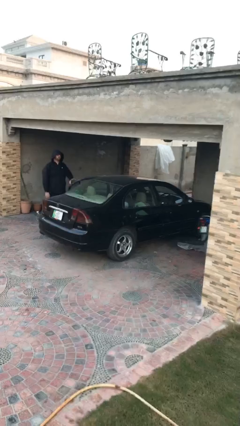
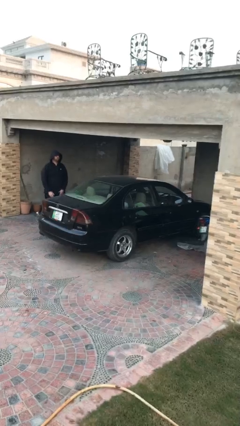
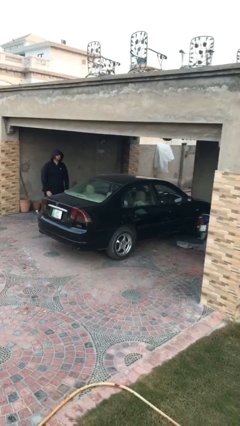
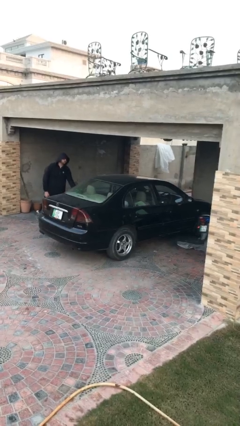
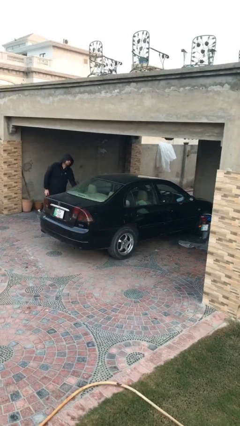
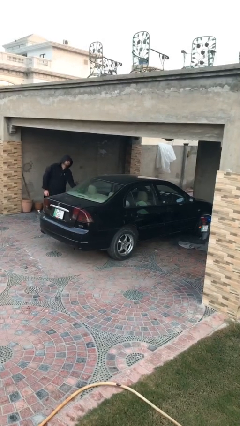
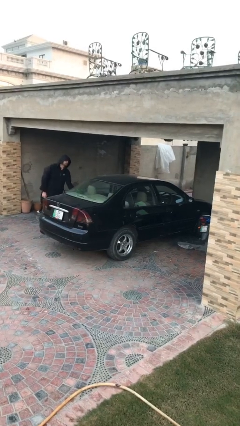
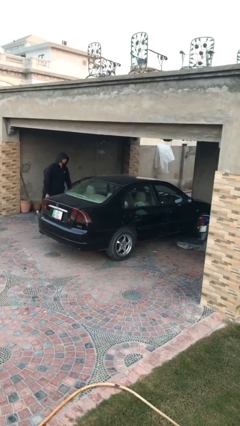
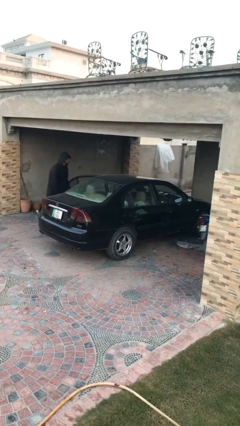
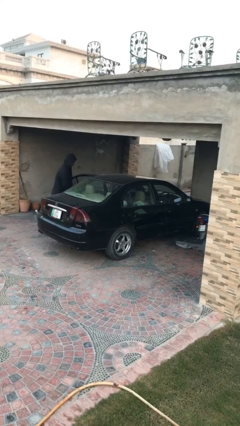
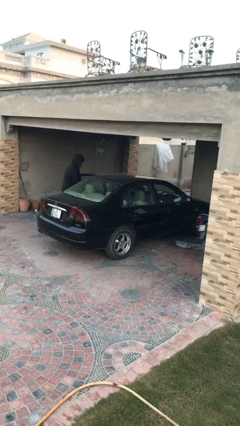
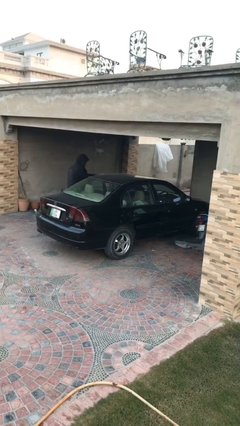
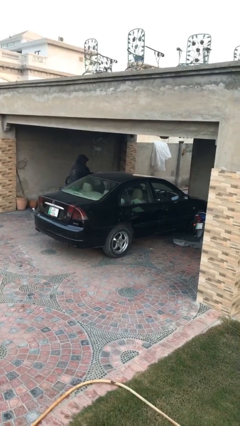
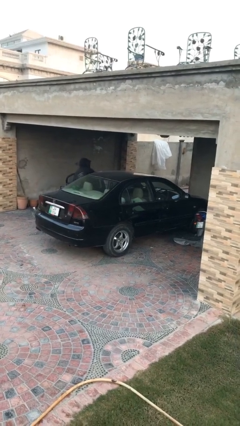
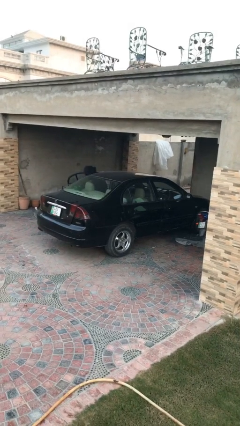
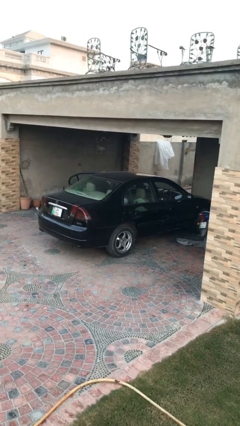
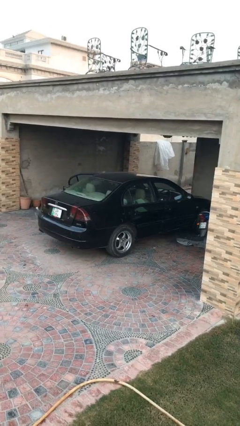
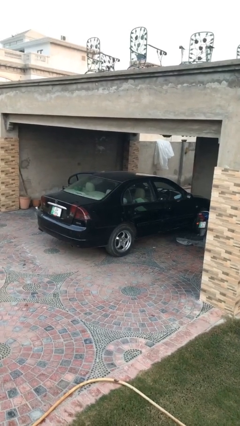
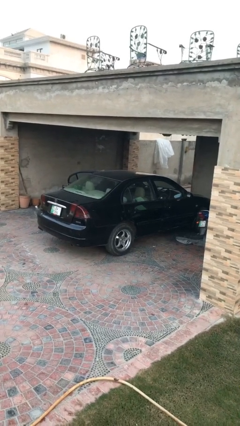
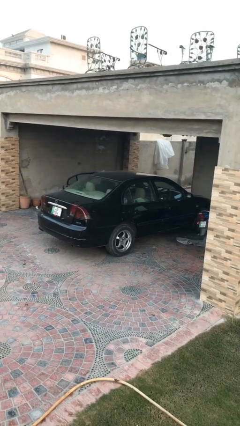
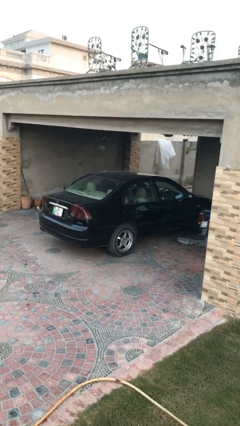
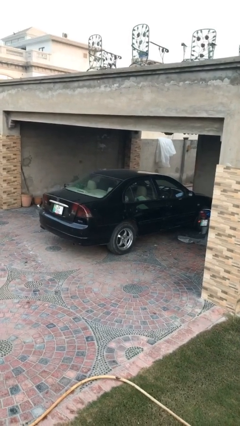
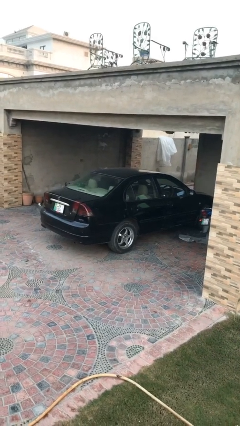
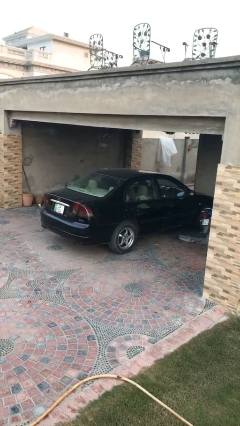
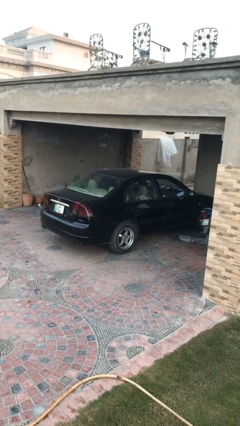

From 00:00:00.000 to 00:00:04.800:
car picks up person

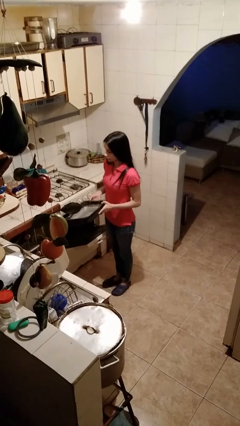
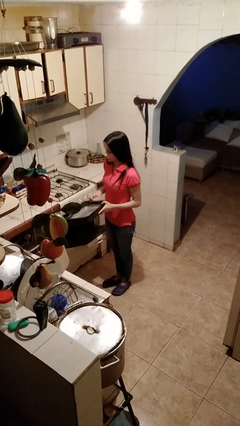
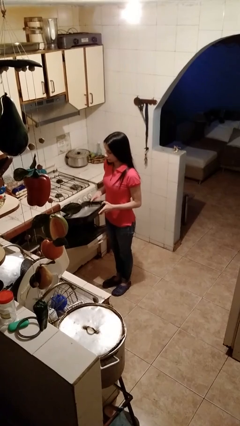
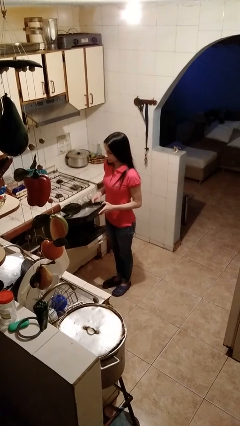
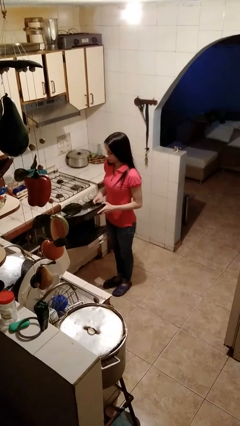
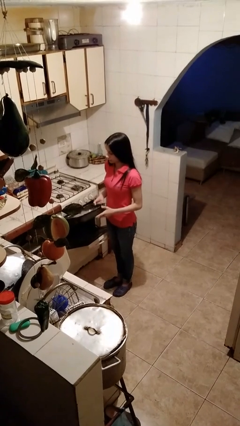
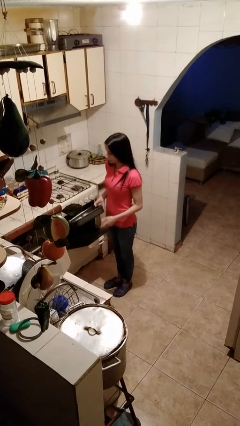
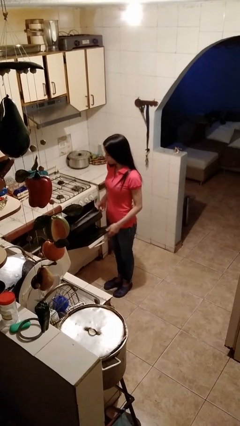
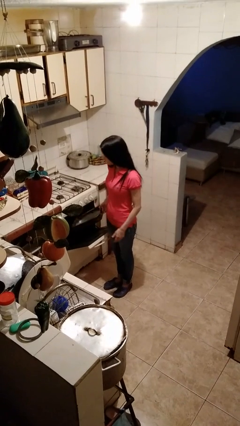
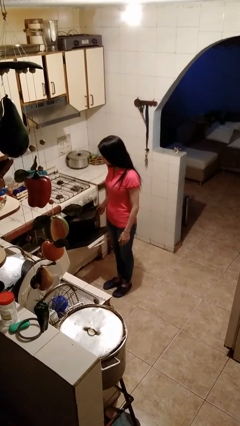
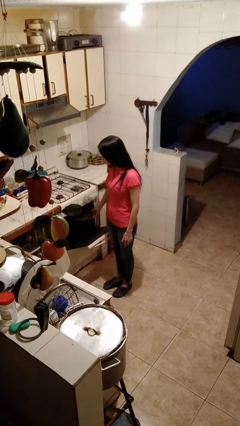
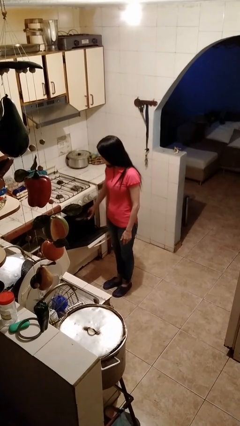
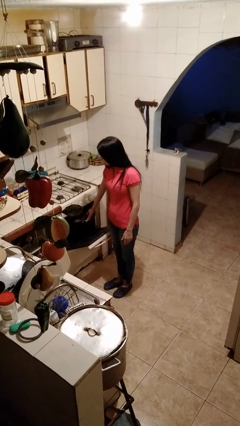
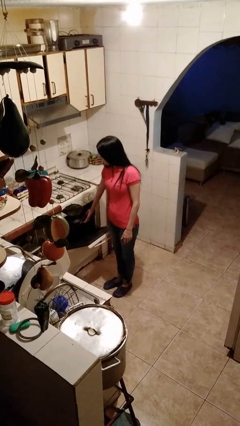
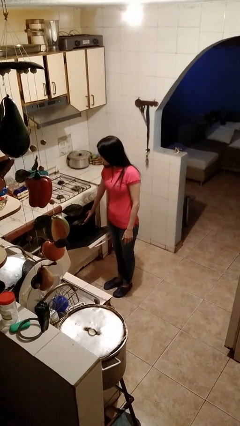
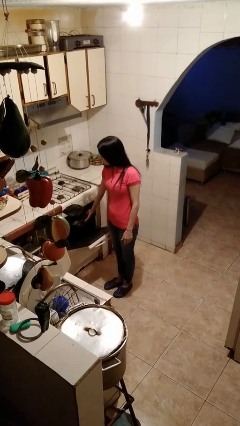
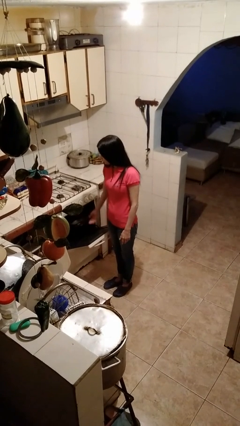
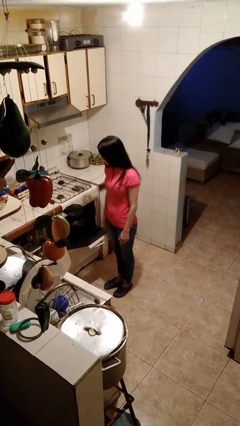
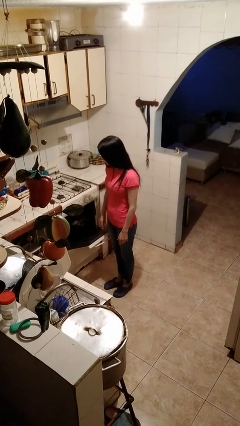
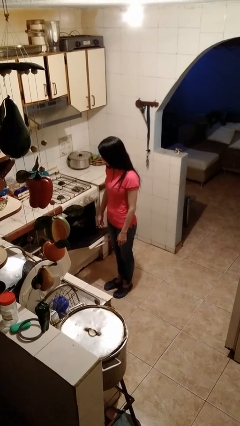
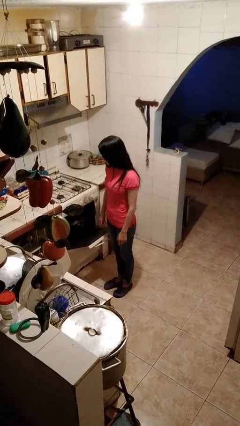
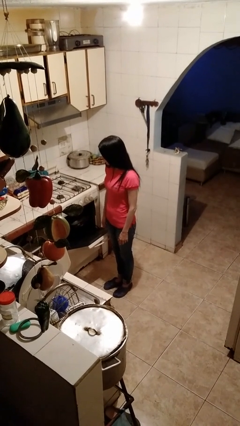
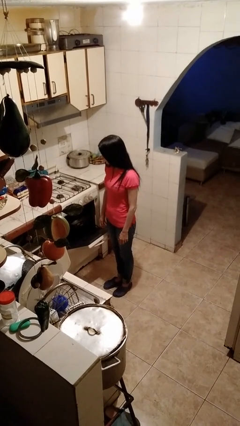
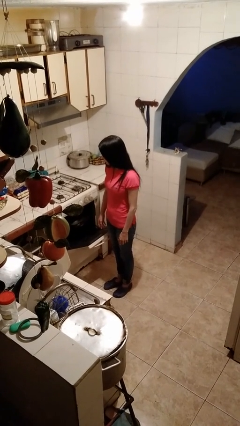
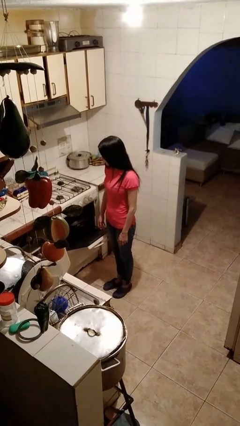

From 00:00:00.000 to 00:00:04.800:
person puts object into oven

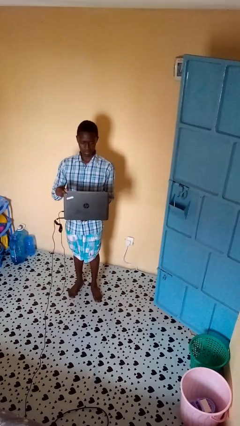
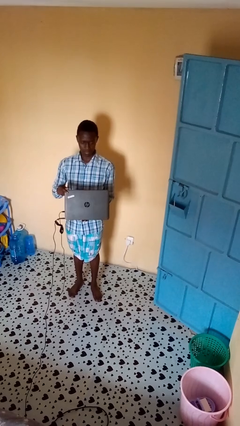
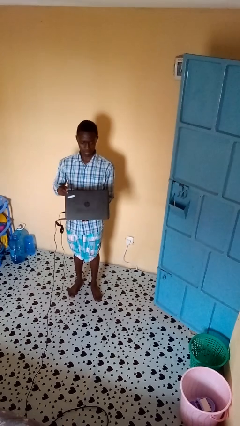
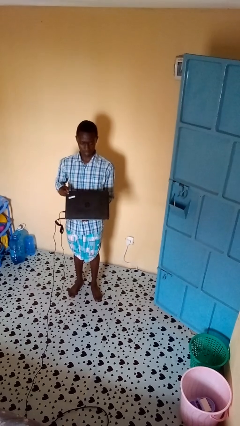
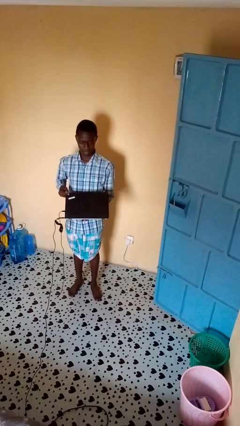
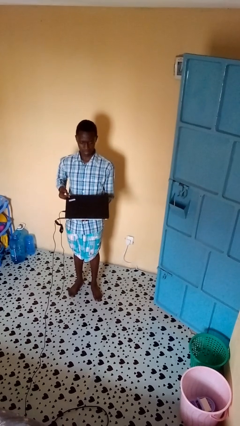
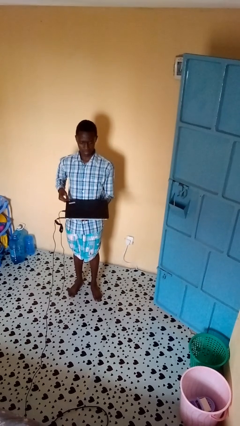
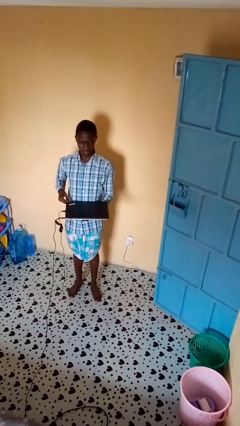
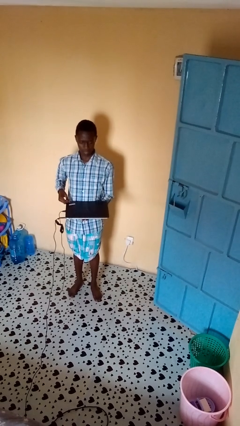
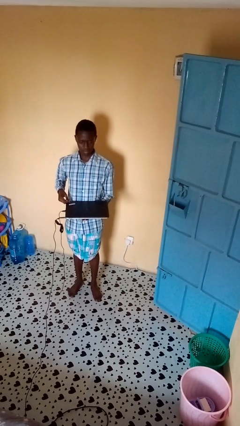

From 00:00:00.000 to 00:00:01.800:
person closes laptop

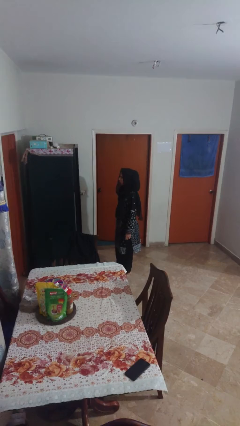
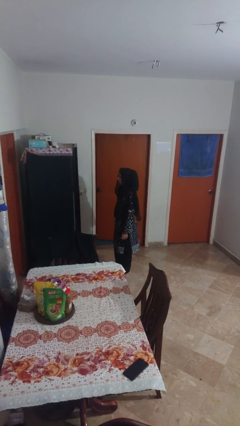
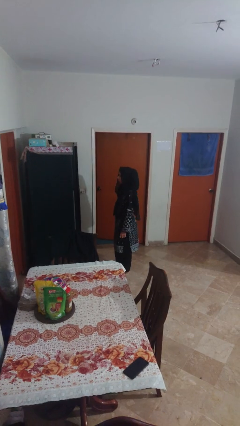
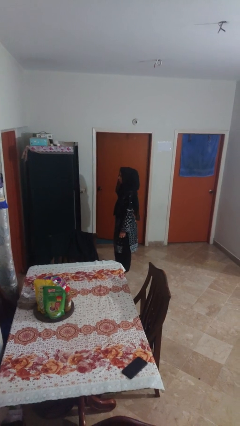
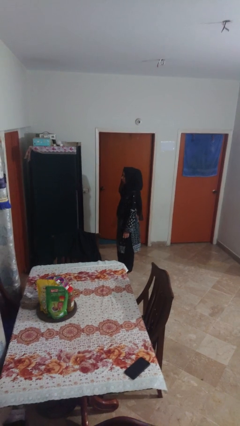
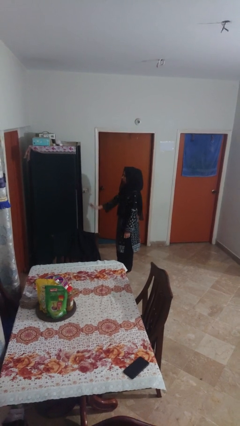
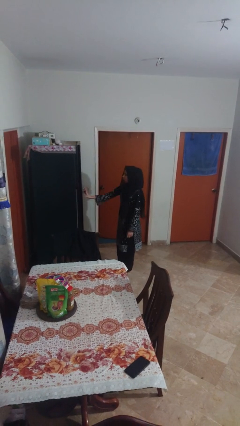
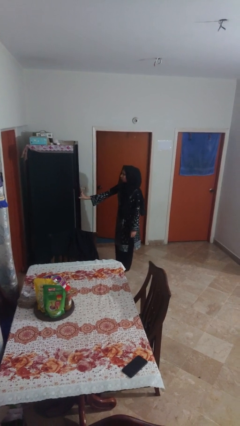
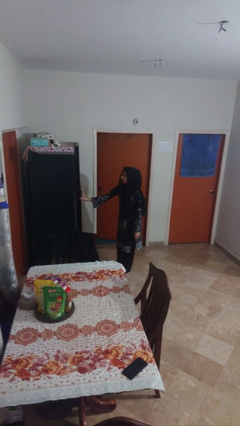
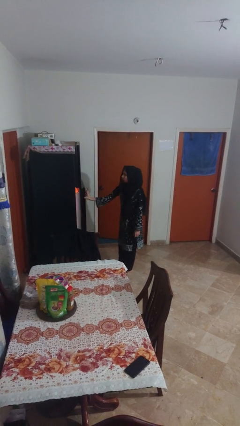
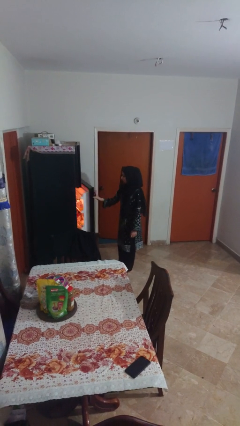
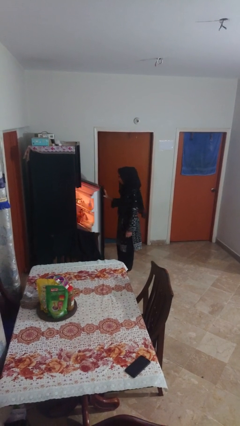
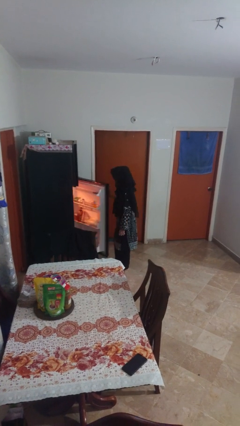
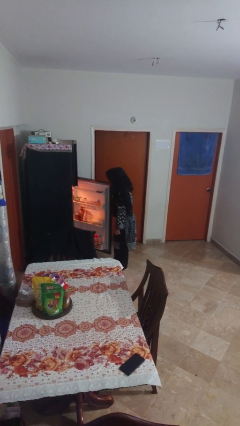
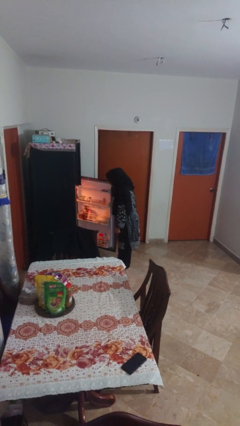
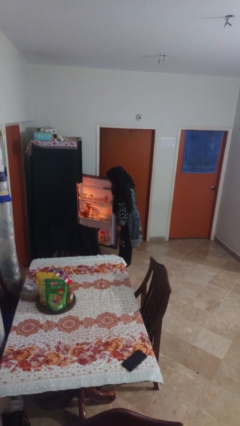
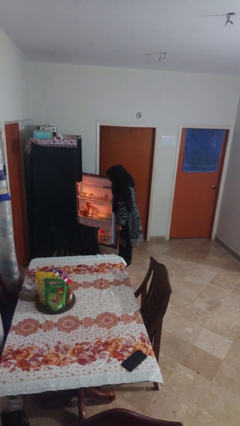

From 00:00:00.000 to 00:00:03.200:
person opens refrigerator

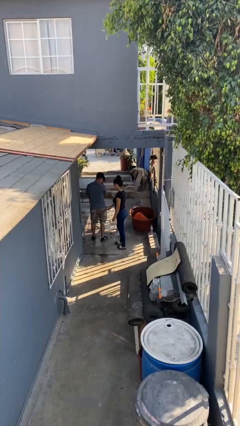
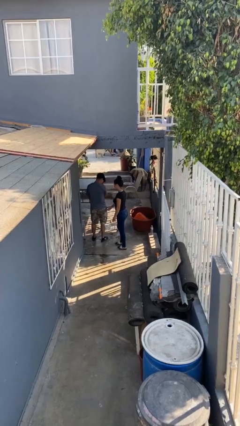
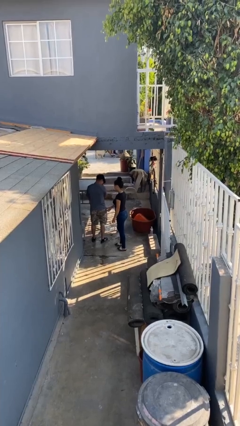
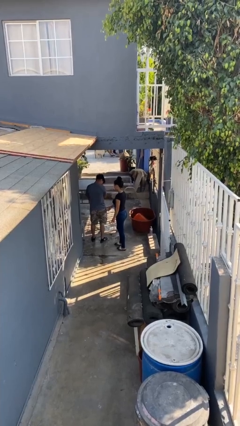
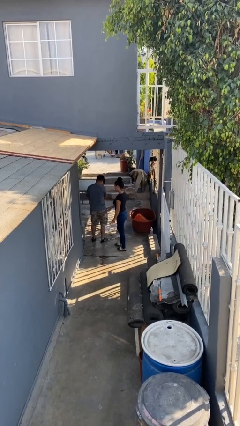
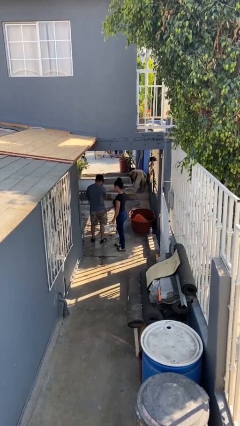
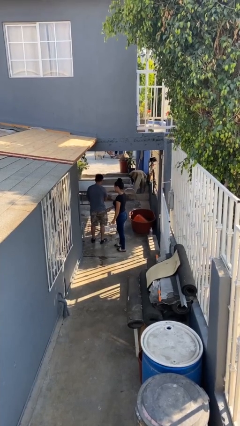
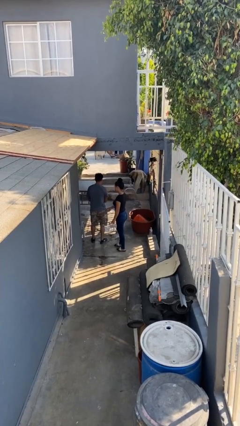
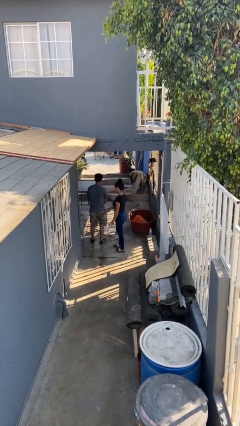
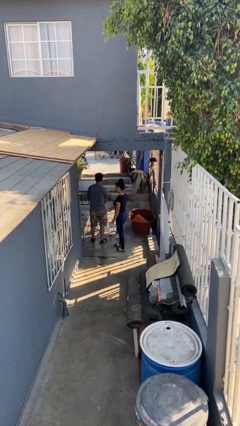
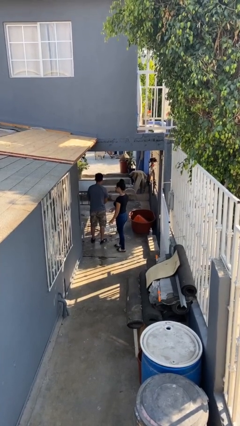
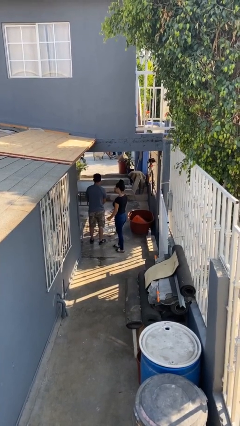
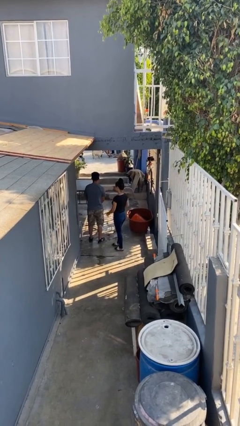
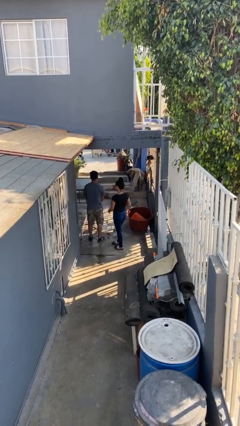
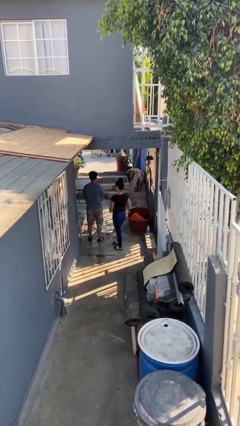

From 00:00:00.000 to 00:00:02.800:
person steals object from person

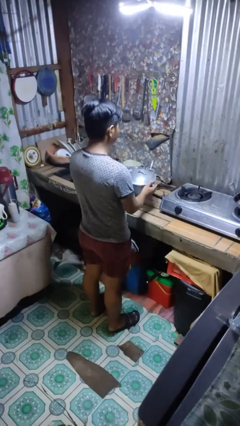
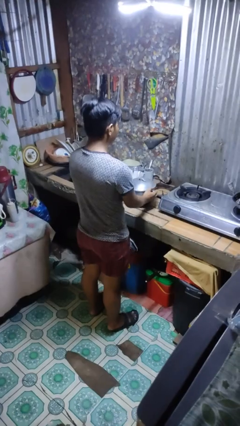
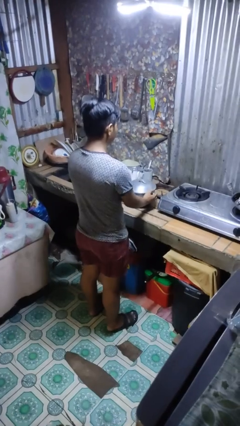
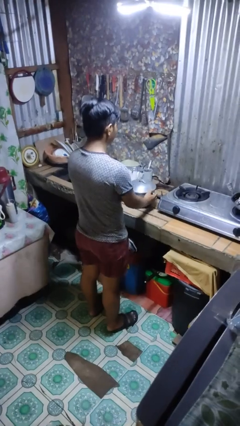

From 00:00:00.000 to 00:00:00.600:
person puts down object on countertop
